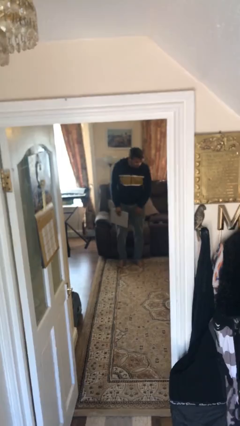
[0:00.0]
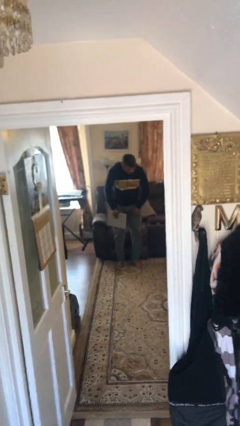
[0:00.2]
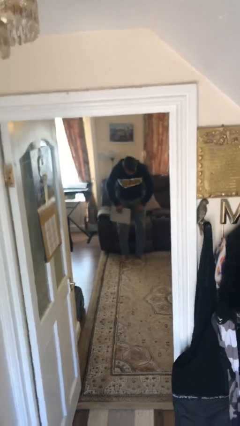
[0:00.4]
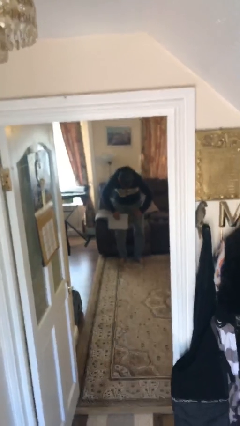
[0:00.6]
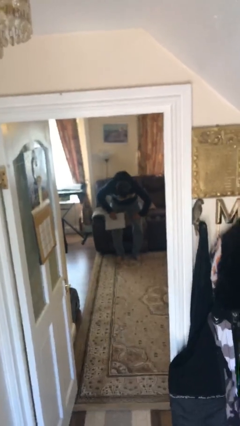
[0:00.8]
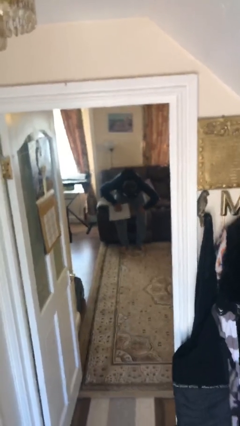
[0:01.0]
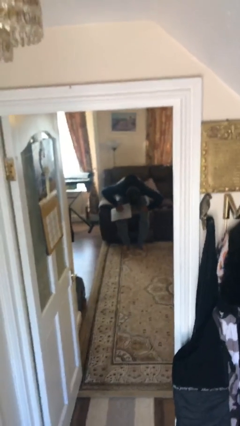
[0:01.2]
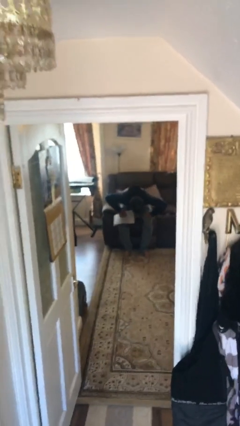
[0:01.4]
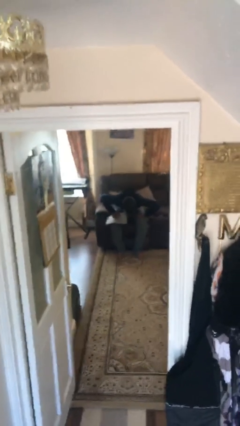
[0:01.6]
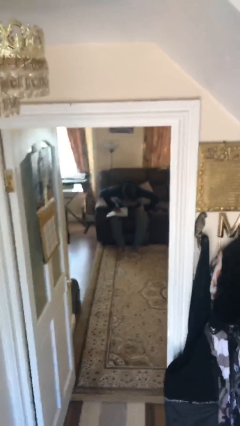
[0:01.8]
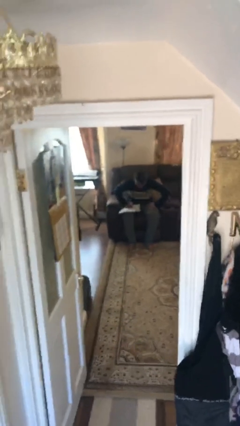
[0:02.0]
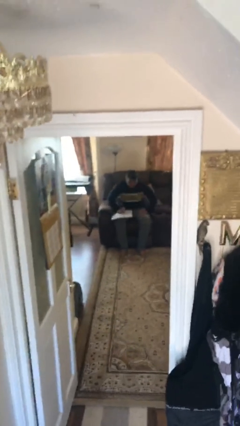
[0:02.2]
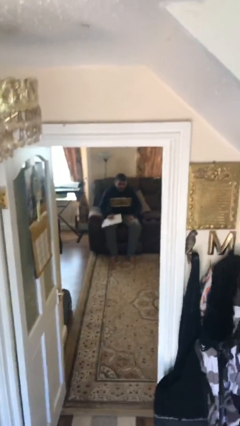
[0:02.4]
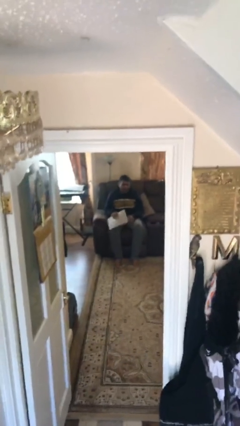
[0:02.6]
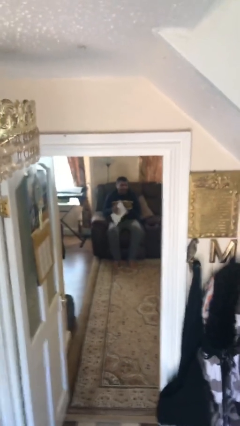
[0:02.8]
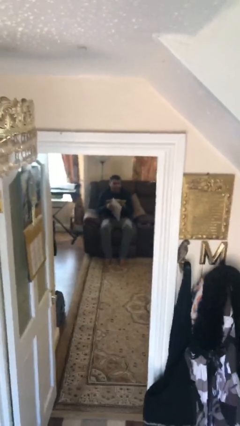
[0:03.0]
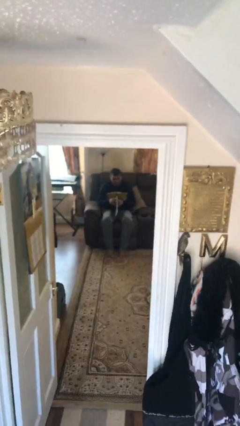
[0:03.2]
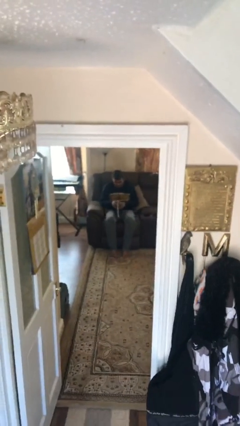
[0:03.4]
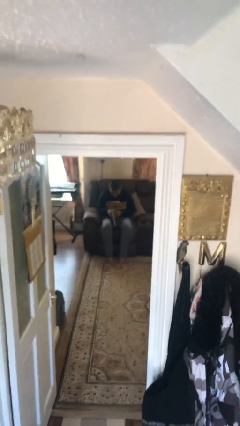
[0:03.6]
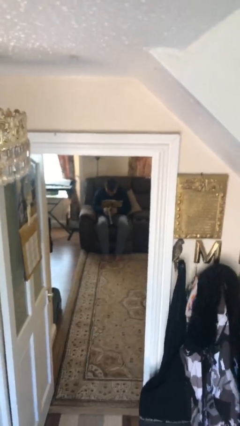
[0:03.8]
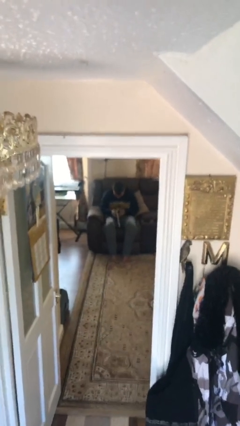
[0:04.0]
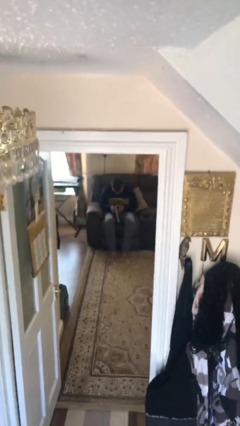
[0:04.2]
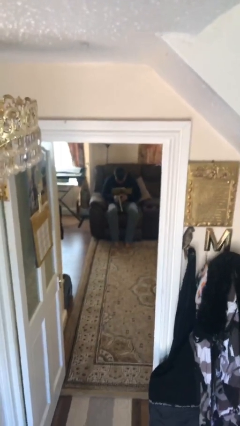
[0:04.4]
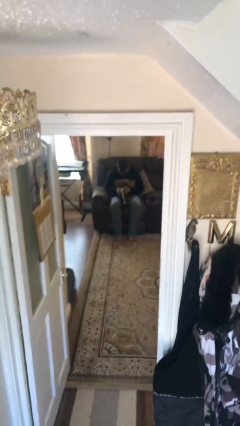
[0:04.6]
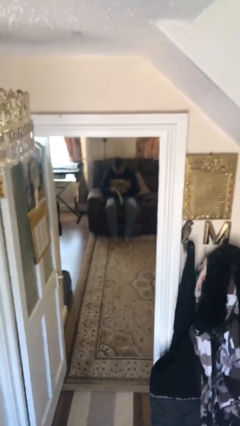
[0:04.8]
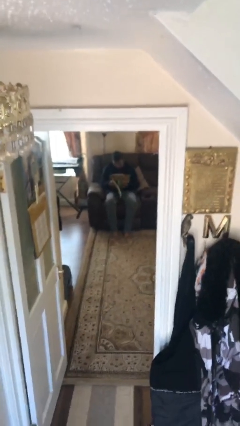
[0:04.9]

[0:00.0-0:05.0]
person sits down

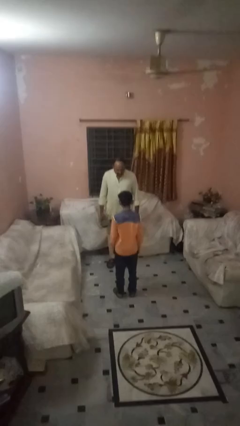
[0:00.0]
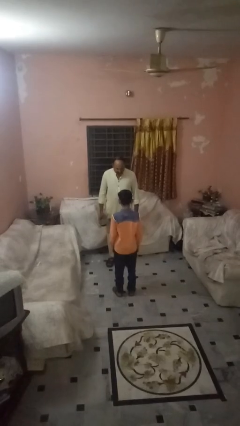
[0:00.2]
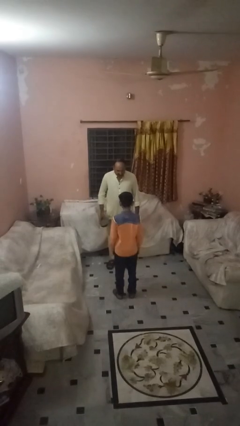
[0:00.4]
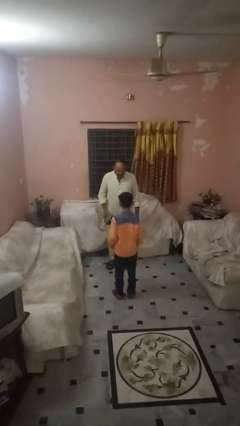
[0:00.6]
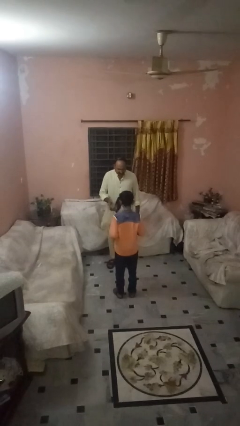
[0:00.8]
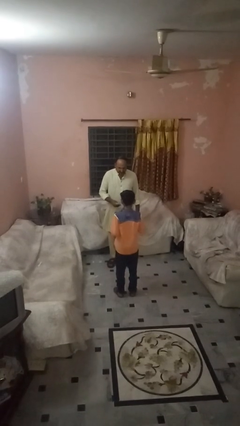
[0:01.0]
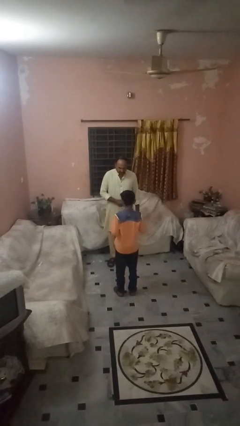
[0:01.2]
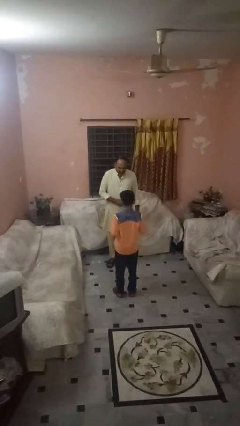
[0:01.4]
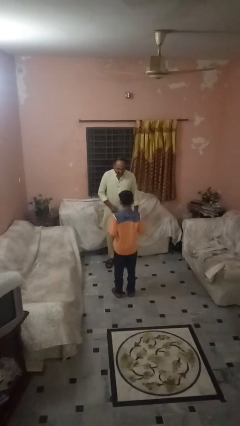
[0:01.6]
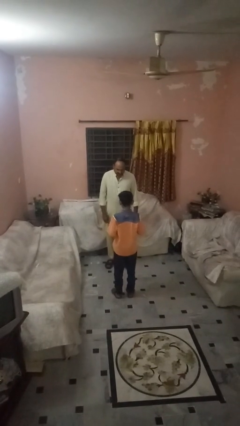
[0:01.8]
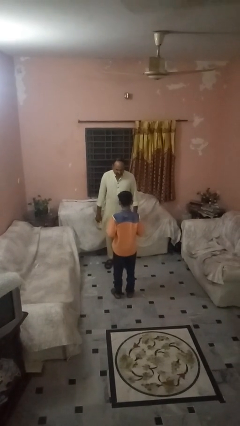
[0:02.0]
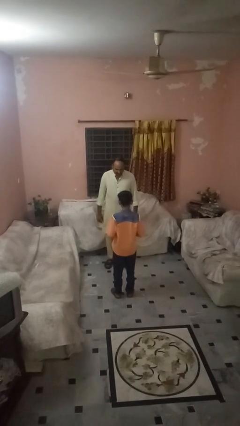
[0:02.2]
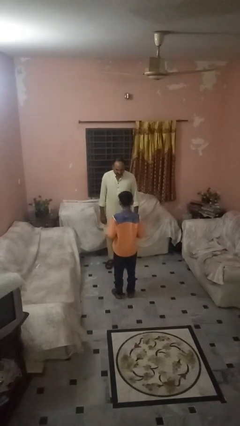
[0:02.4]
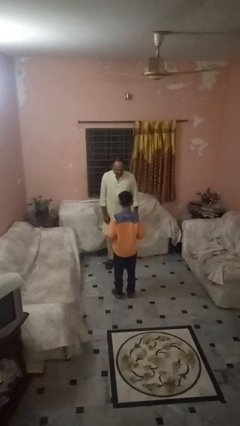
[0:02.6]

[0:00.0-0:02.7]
person throws object to person

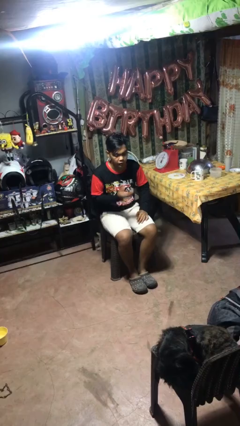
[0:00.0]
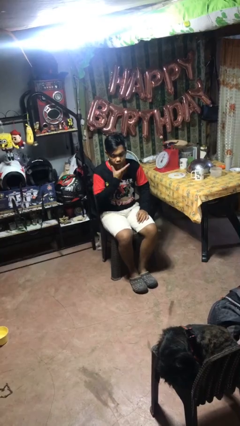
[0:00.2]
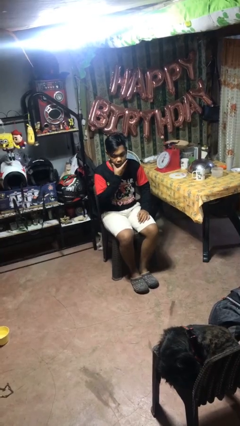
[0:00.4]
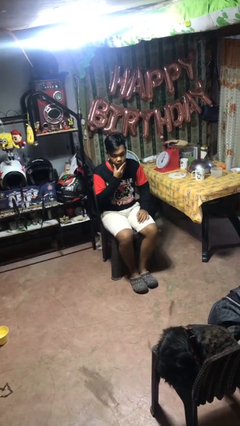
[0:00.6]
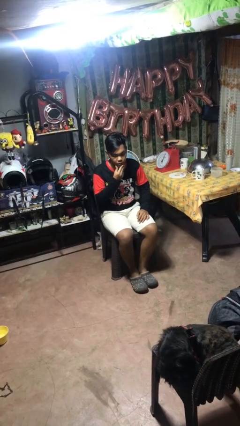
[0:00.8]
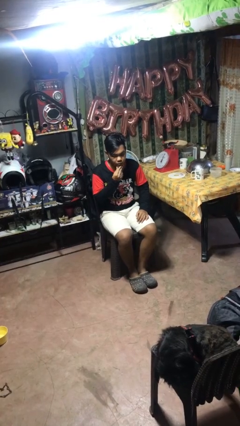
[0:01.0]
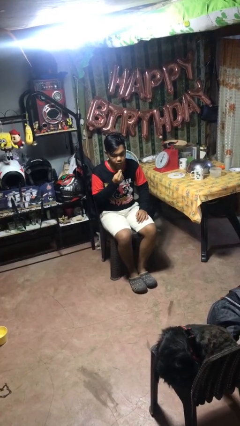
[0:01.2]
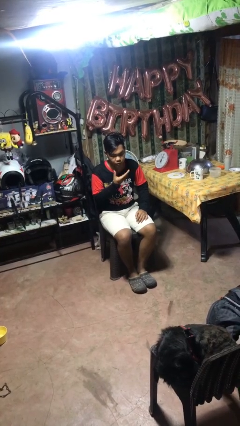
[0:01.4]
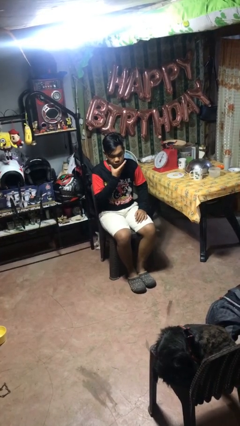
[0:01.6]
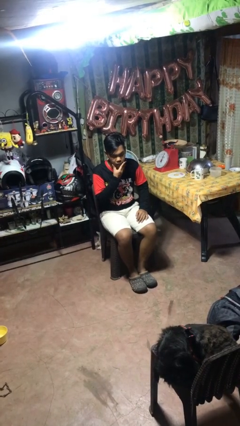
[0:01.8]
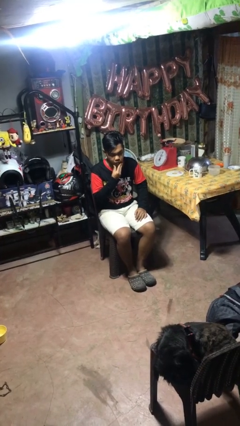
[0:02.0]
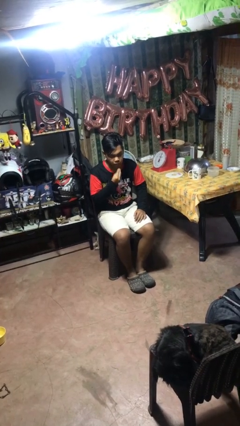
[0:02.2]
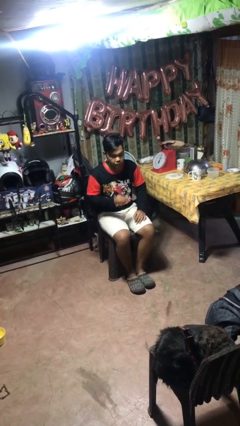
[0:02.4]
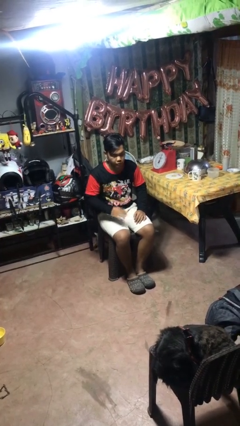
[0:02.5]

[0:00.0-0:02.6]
person strokes chin

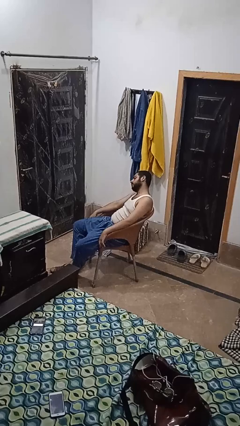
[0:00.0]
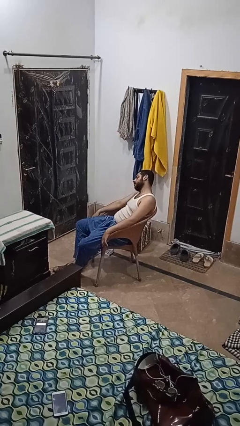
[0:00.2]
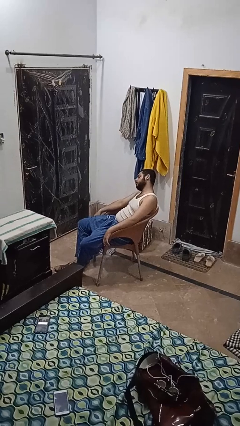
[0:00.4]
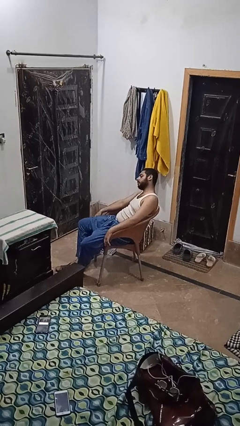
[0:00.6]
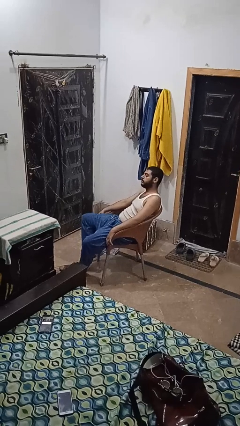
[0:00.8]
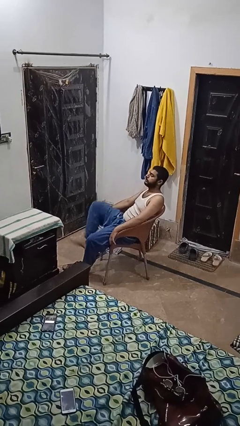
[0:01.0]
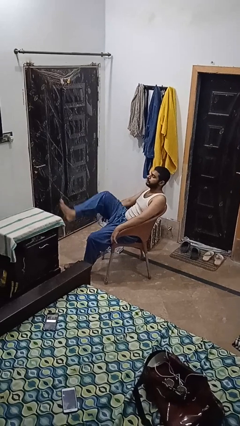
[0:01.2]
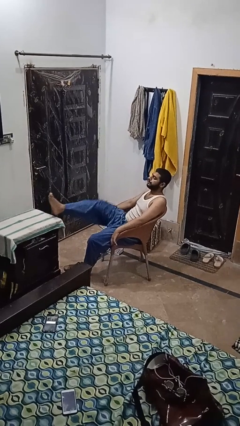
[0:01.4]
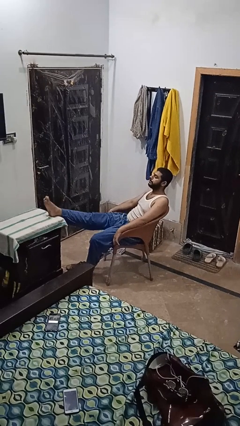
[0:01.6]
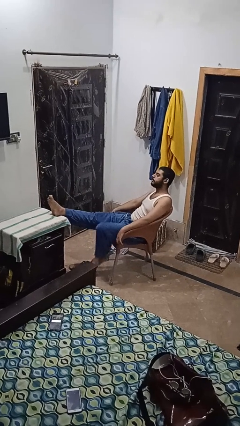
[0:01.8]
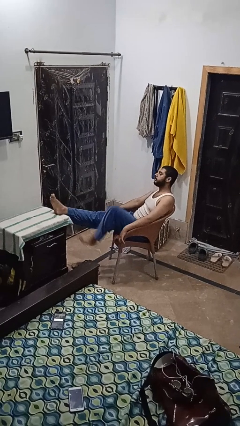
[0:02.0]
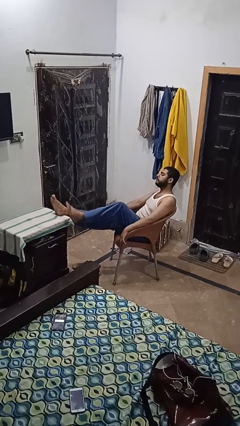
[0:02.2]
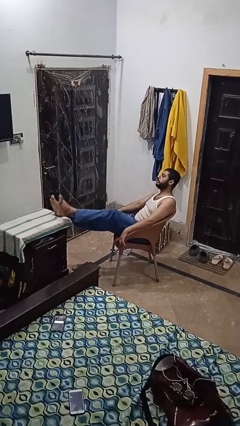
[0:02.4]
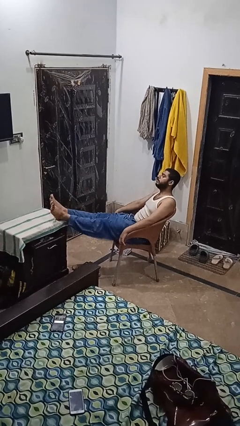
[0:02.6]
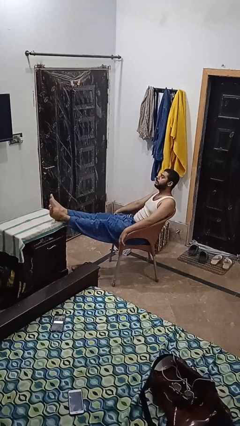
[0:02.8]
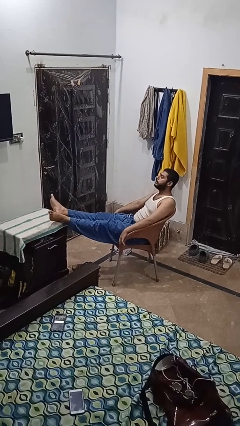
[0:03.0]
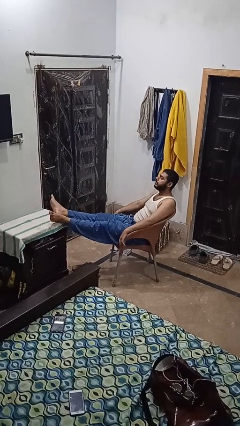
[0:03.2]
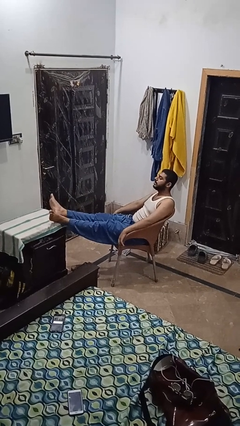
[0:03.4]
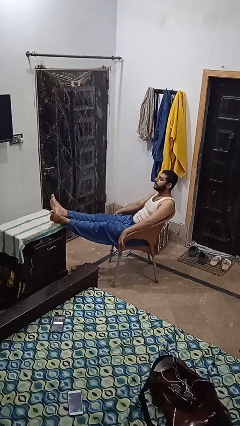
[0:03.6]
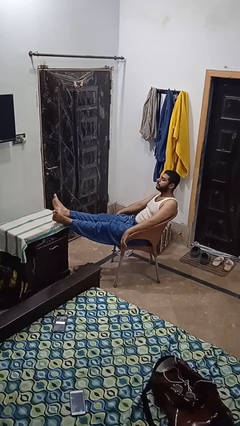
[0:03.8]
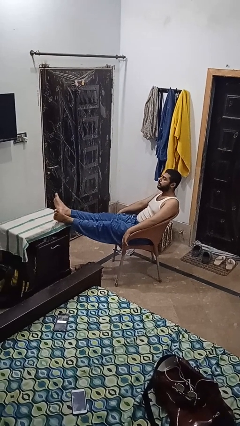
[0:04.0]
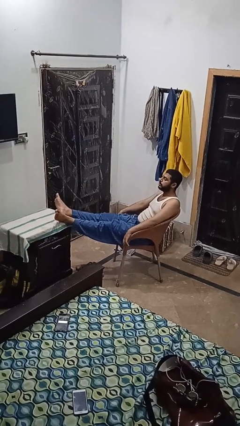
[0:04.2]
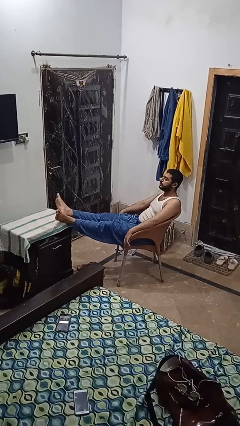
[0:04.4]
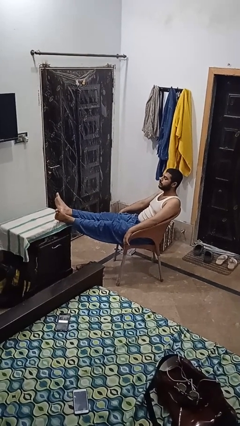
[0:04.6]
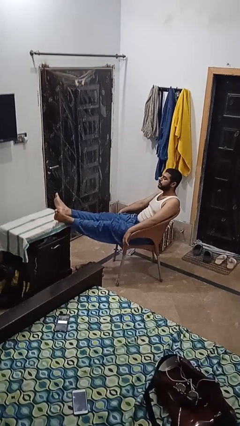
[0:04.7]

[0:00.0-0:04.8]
person puts feet up

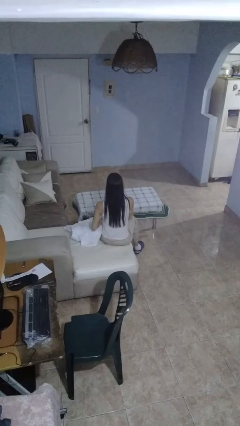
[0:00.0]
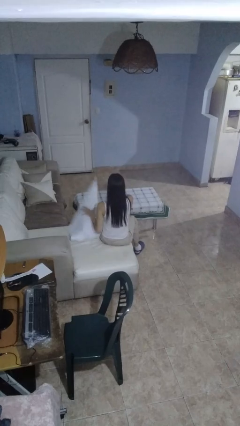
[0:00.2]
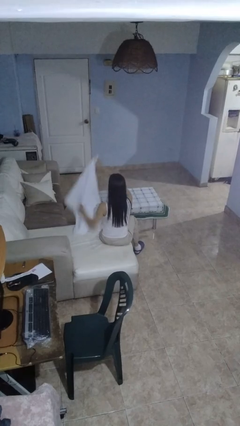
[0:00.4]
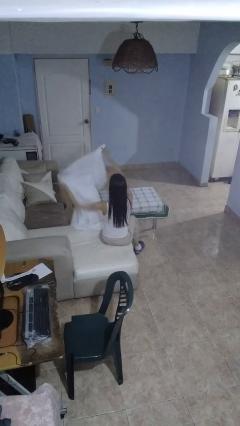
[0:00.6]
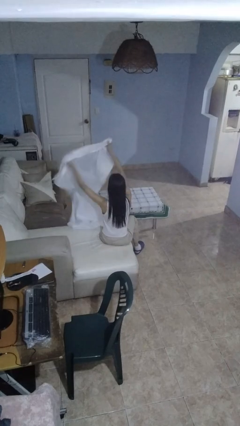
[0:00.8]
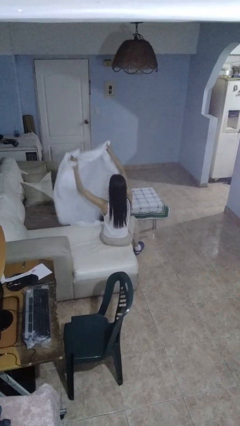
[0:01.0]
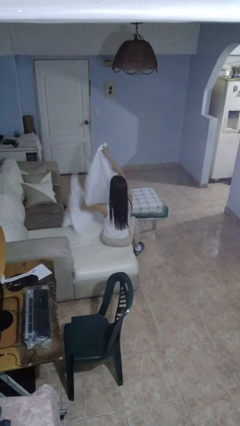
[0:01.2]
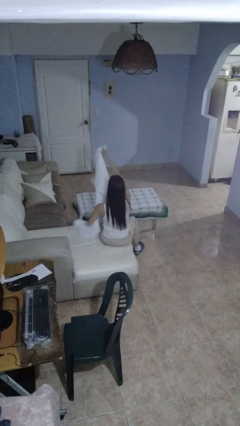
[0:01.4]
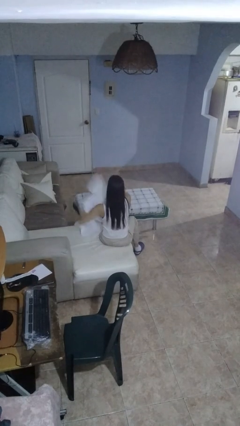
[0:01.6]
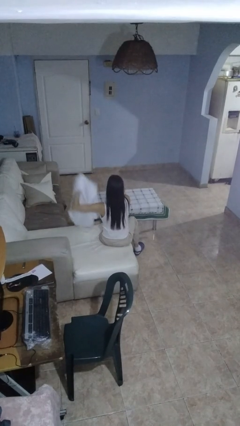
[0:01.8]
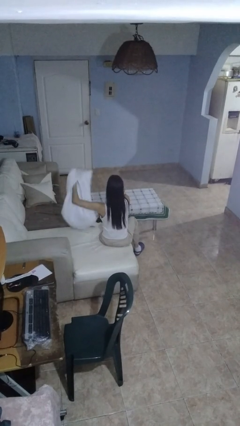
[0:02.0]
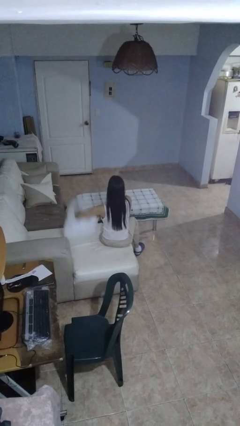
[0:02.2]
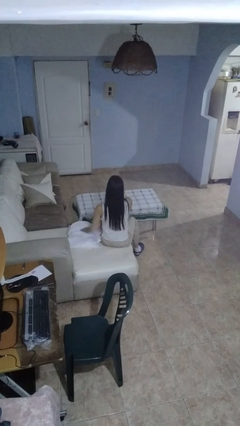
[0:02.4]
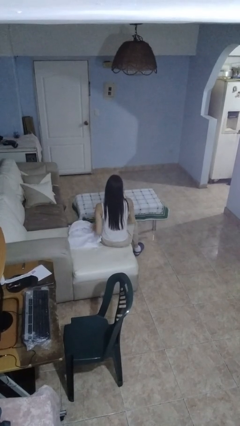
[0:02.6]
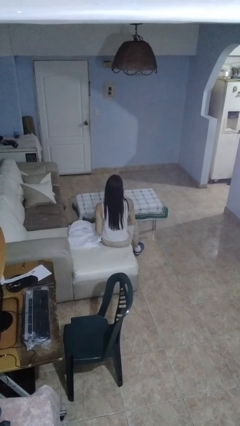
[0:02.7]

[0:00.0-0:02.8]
person unfolds blanket
